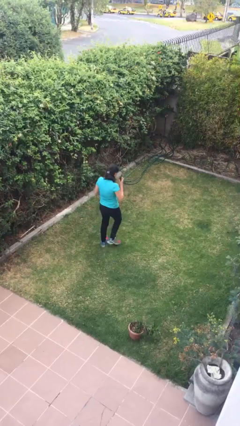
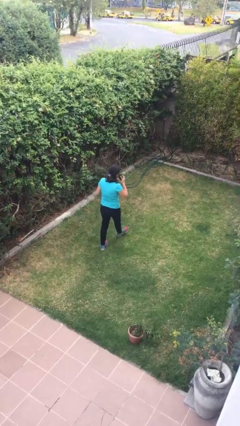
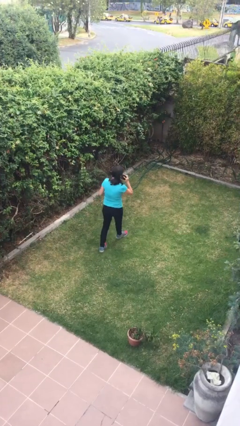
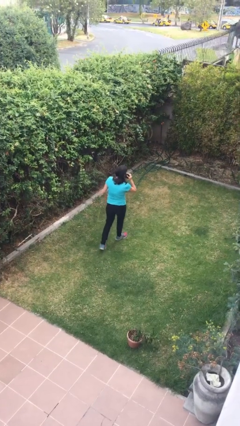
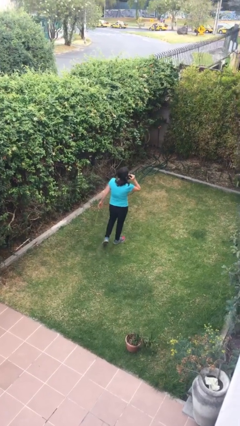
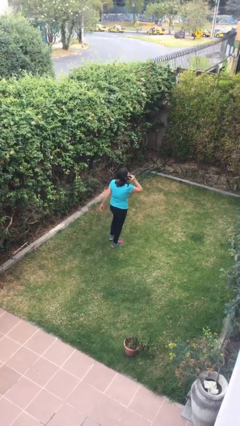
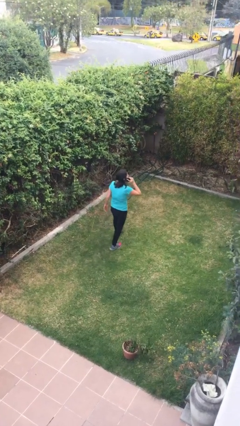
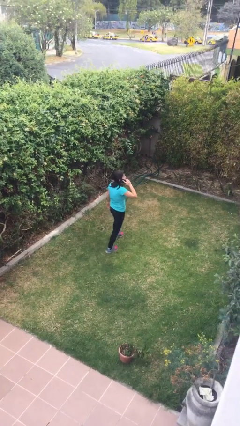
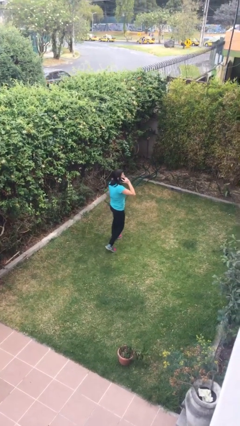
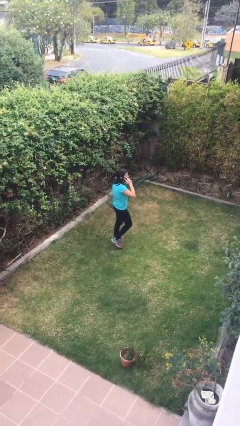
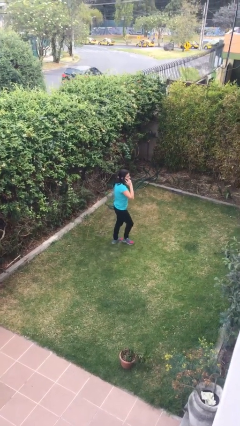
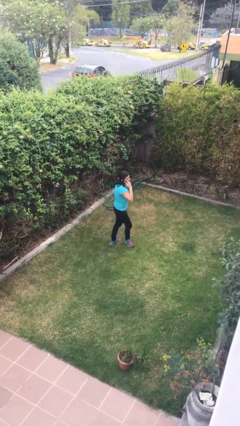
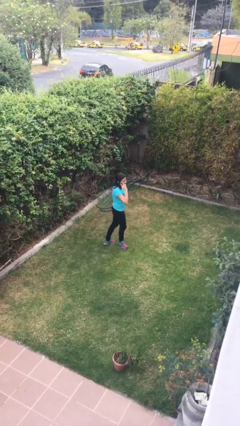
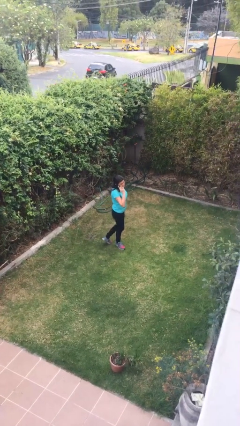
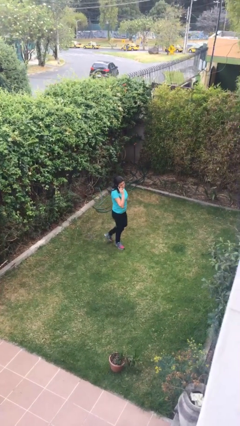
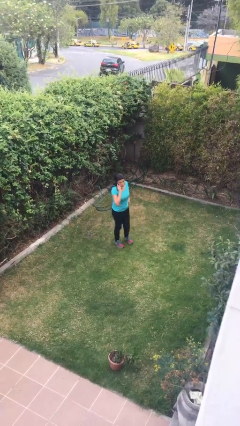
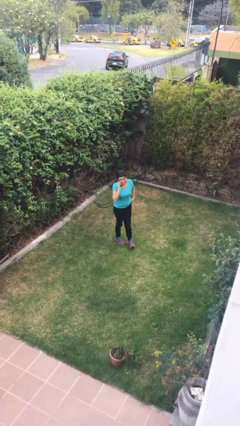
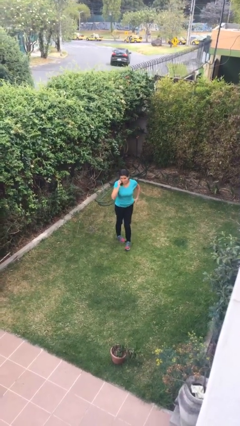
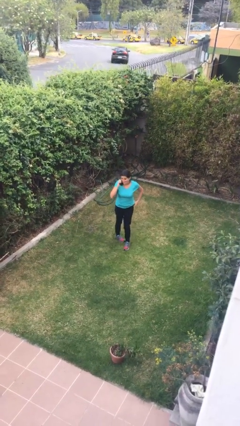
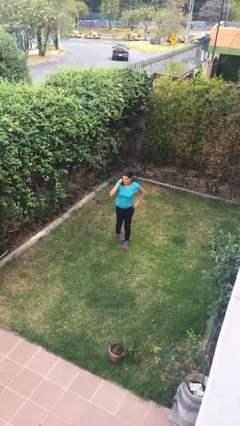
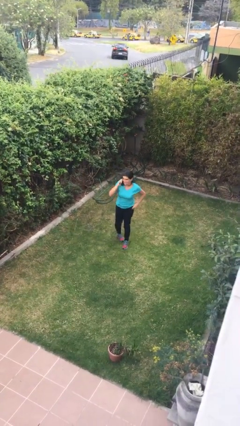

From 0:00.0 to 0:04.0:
person talks on phone

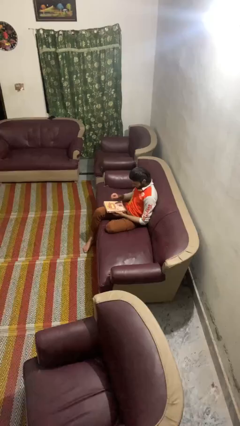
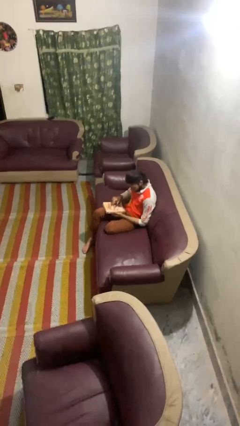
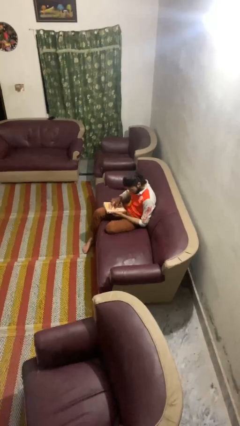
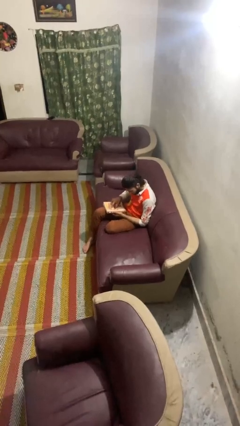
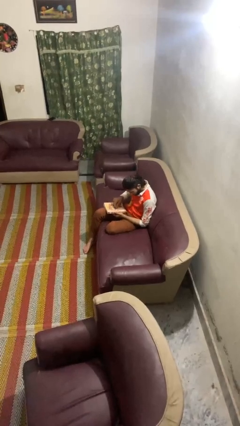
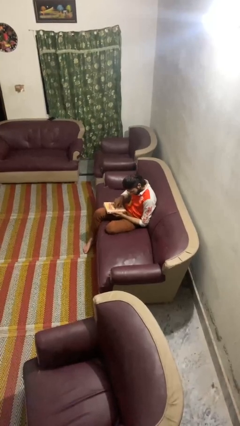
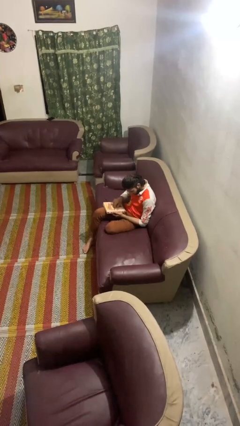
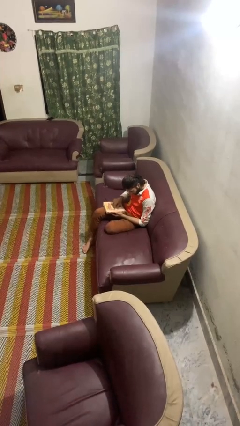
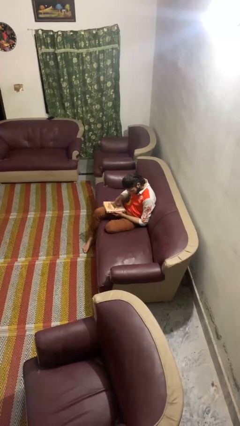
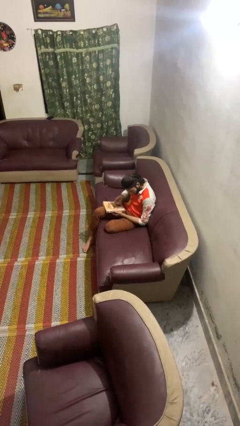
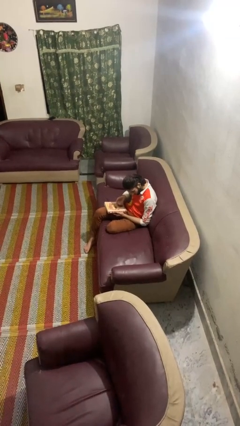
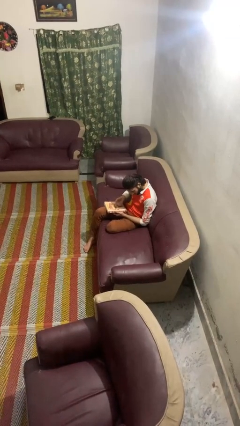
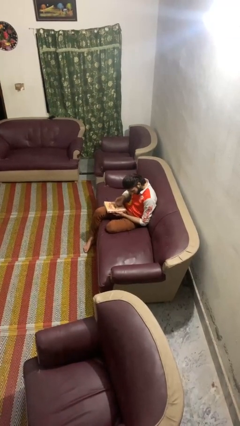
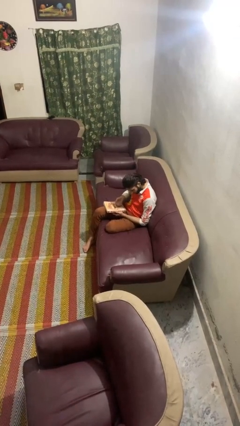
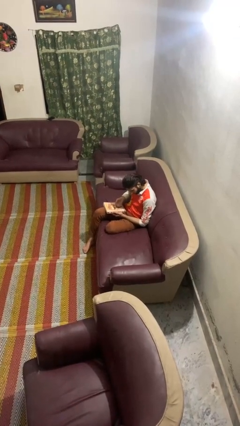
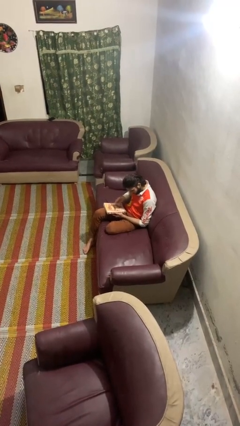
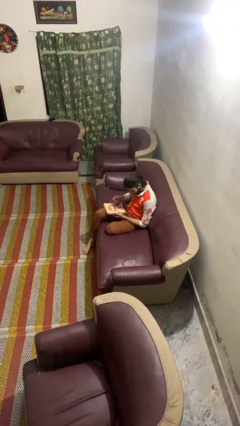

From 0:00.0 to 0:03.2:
person taps object with finger

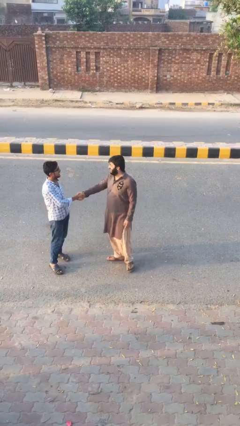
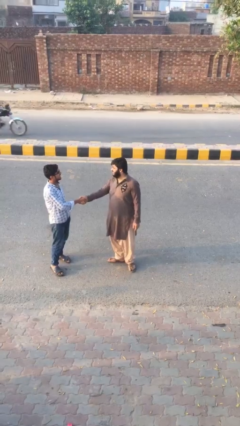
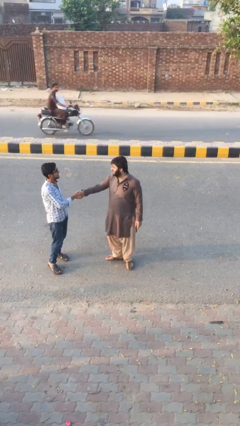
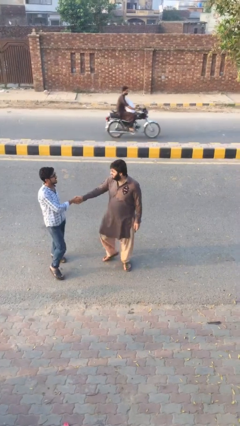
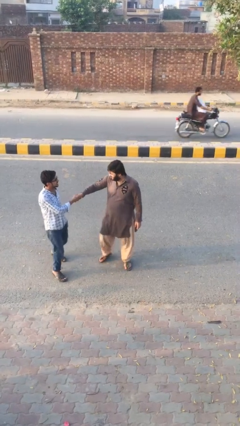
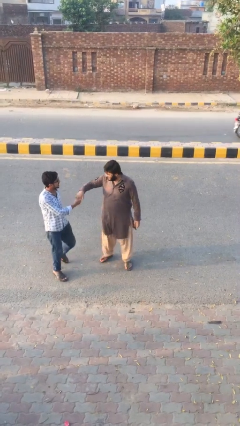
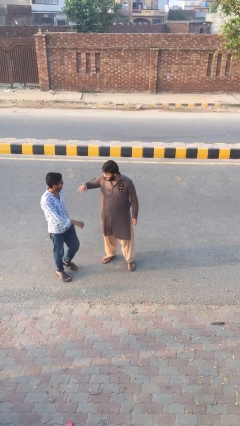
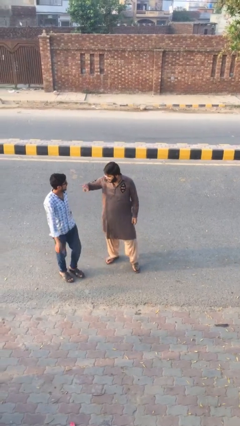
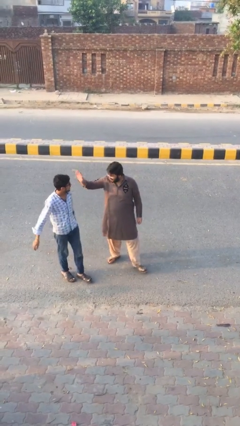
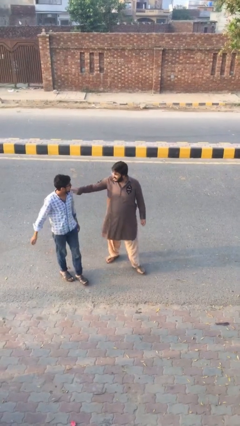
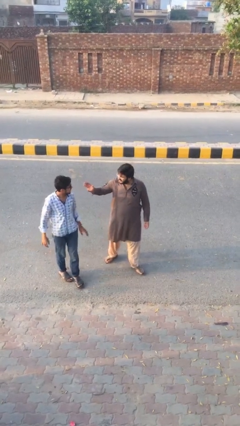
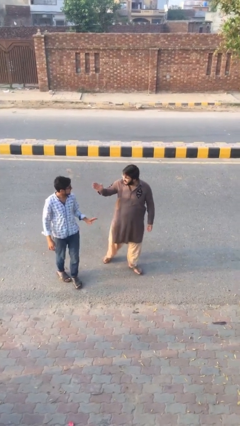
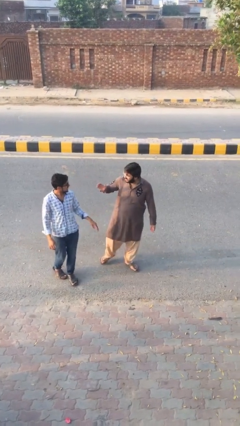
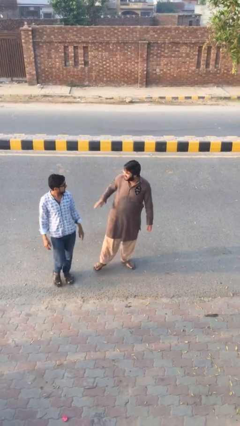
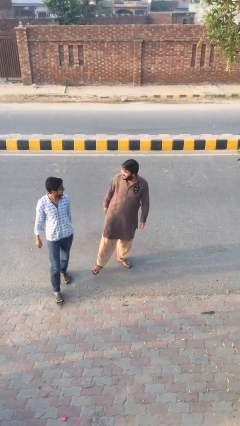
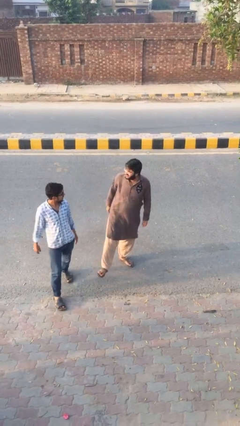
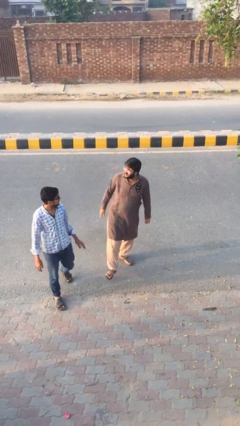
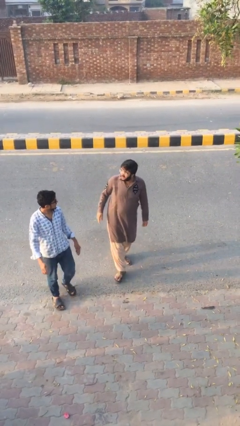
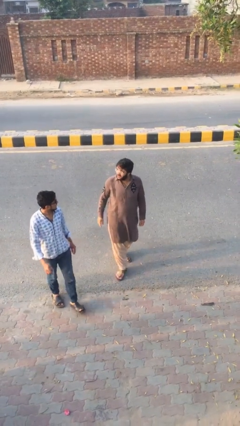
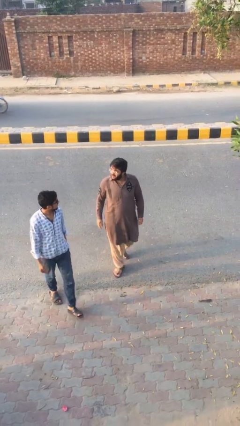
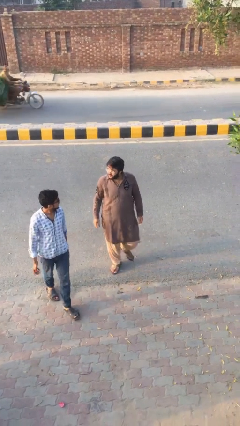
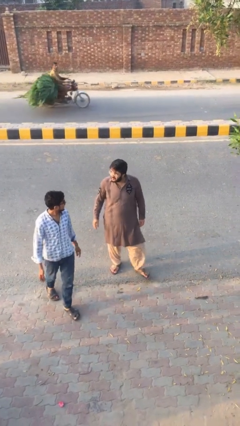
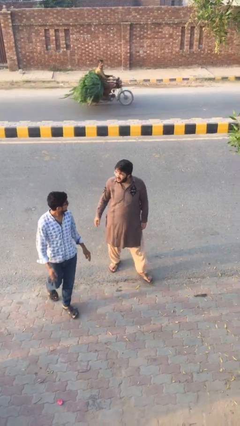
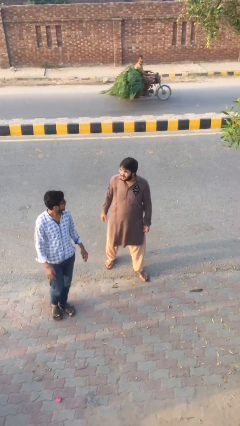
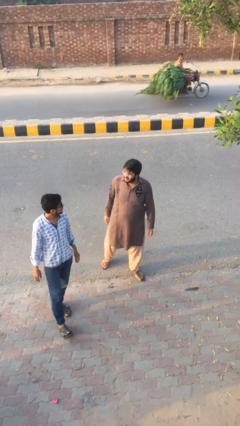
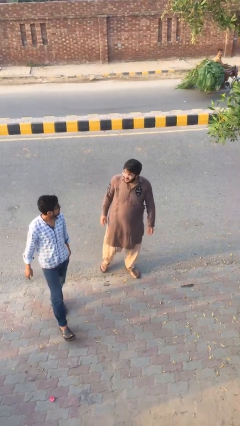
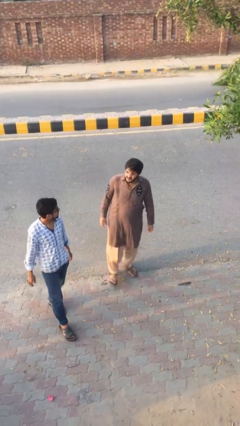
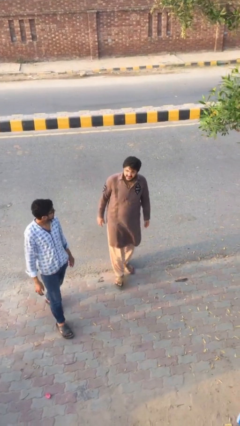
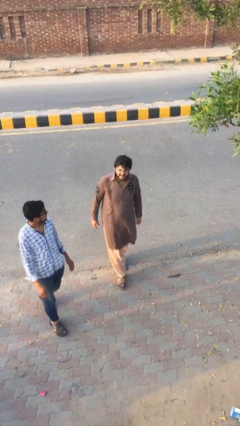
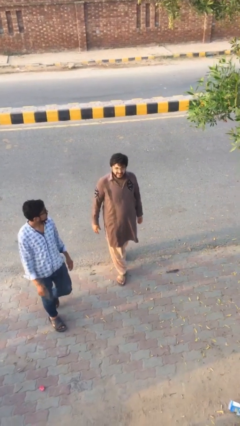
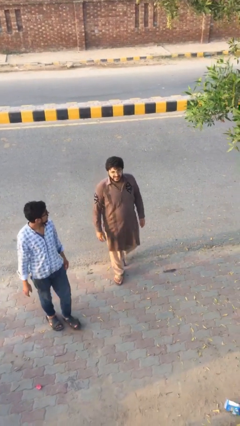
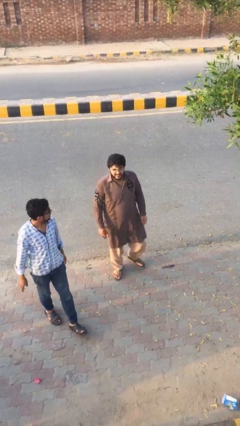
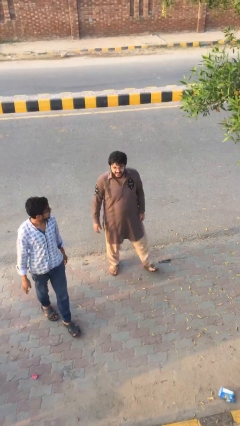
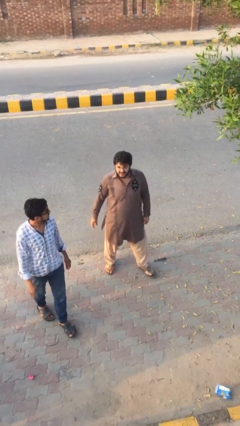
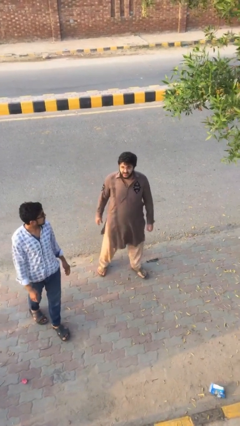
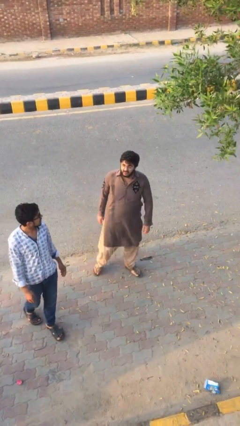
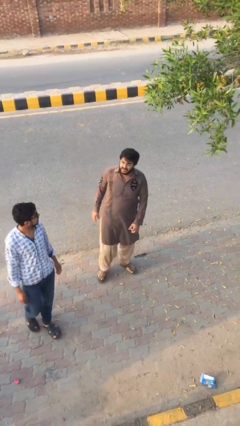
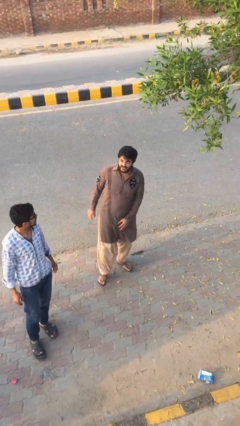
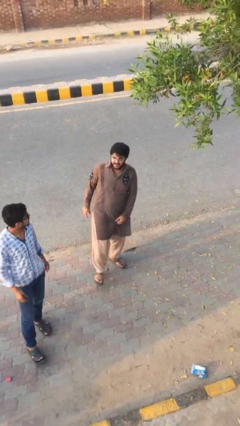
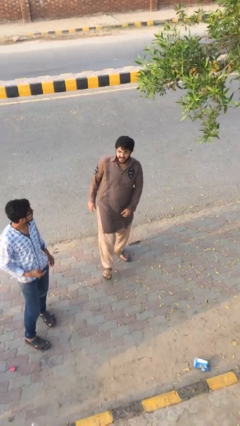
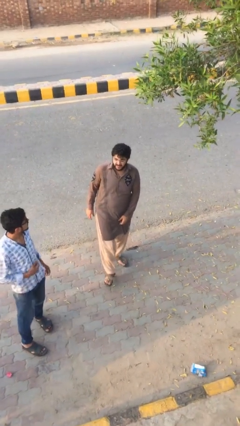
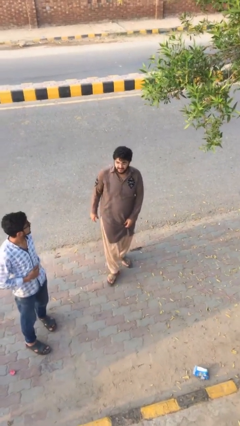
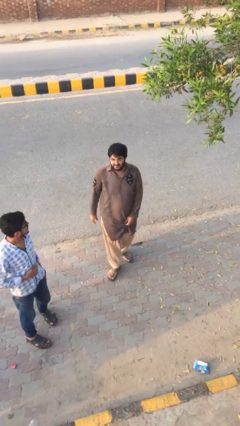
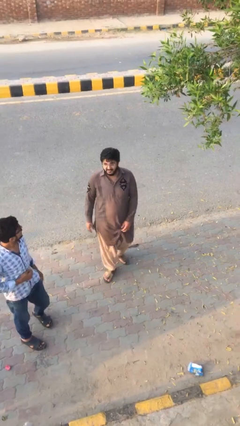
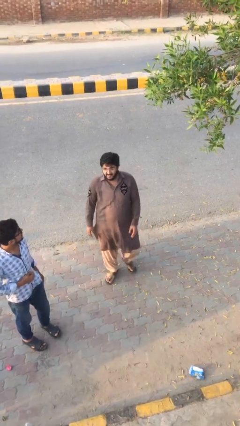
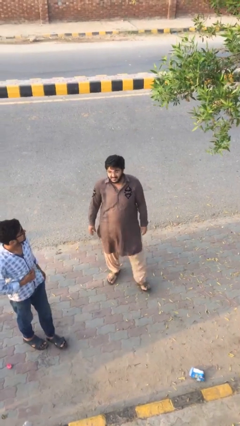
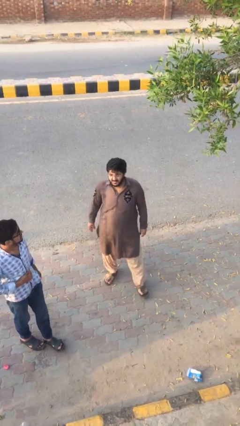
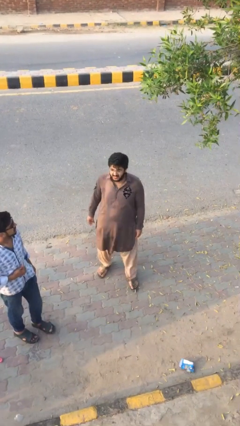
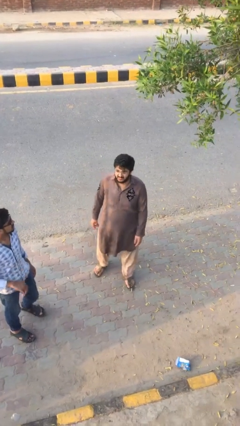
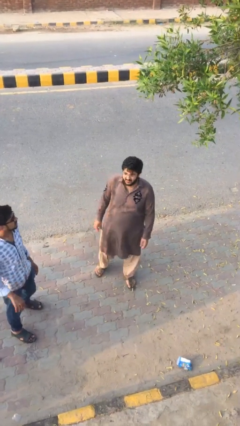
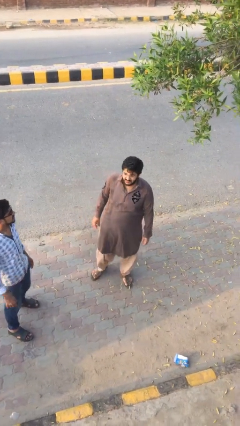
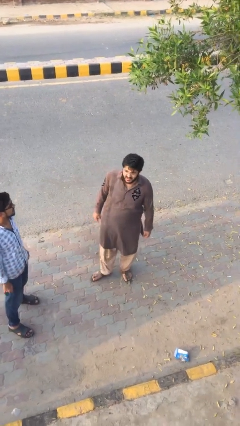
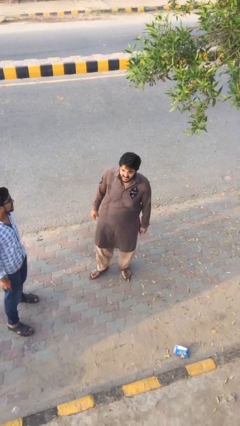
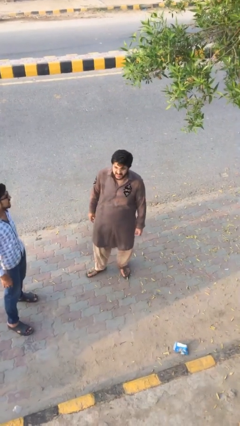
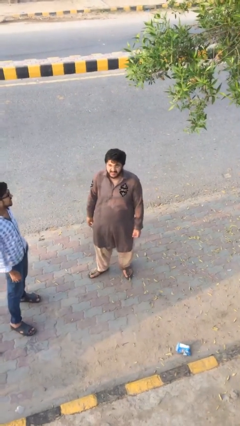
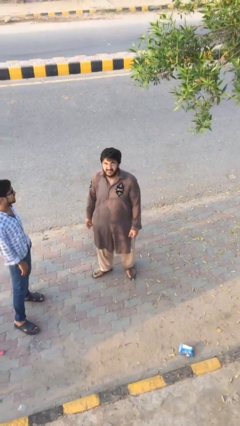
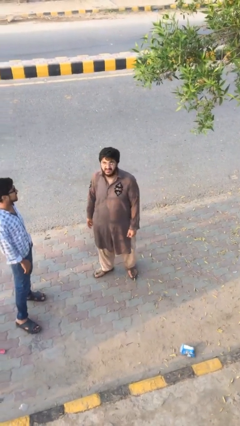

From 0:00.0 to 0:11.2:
person talks to person
